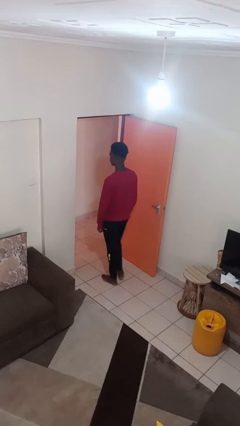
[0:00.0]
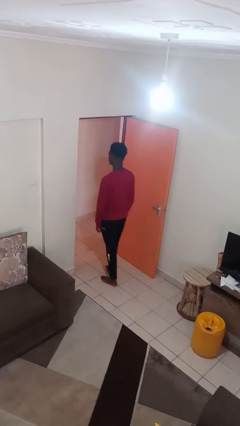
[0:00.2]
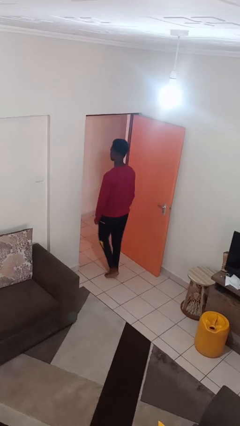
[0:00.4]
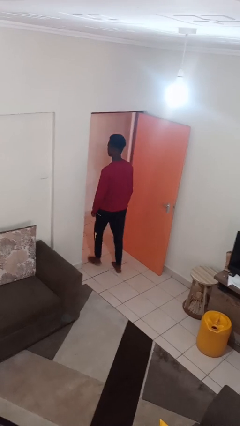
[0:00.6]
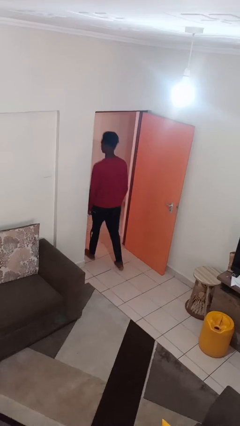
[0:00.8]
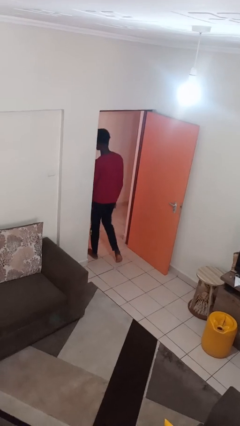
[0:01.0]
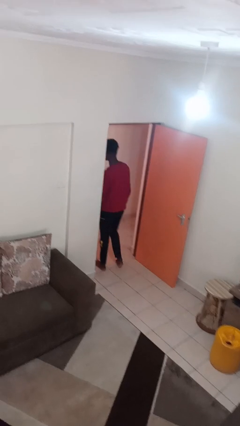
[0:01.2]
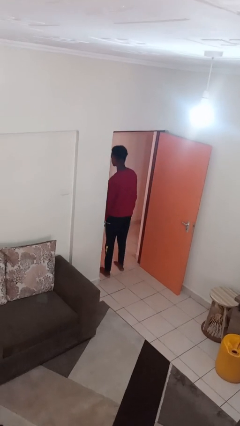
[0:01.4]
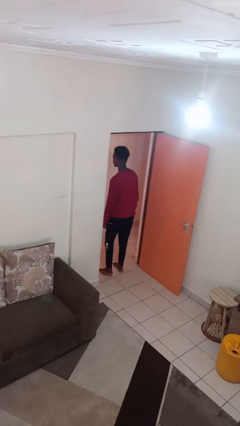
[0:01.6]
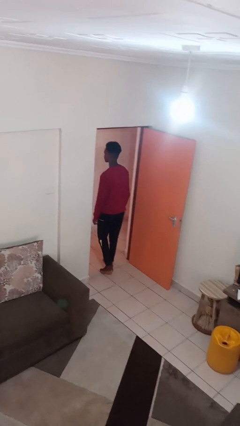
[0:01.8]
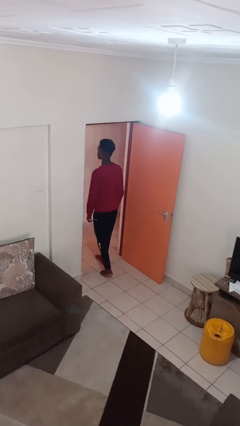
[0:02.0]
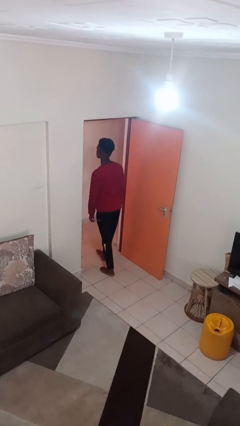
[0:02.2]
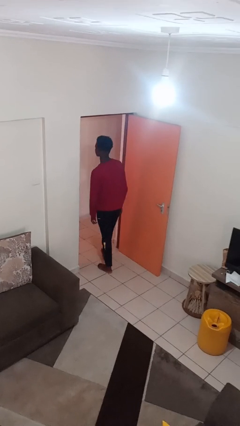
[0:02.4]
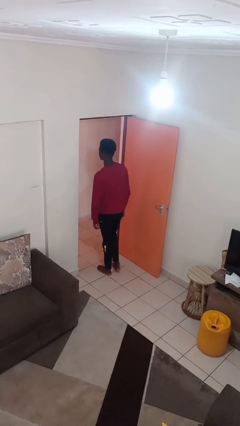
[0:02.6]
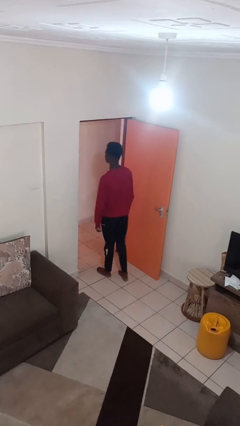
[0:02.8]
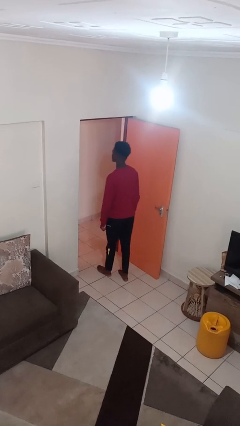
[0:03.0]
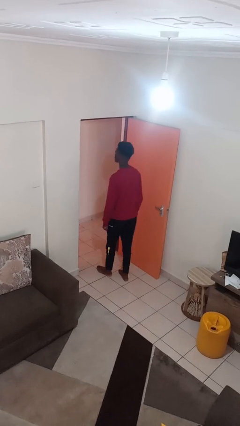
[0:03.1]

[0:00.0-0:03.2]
person bumps into wall

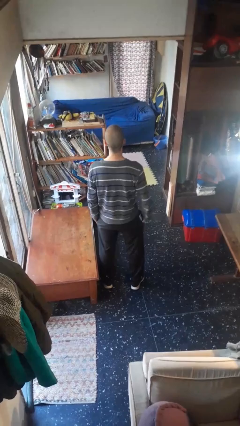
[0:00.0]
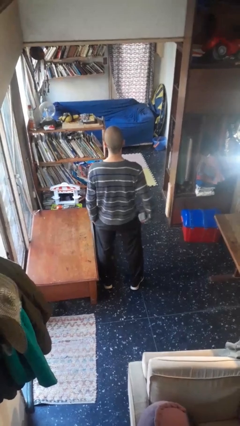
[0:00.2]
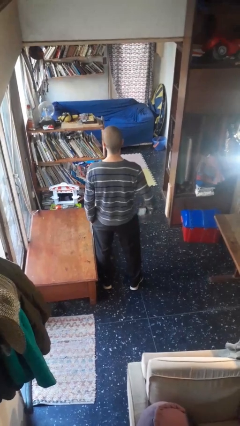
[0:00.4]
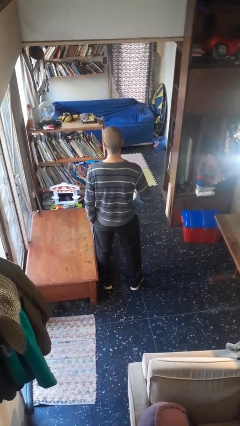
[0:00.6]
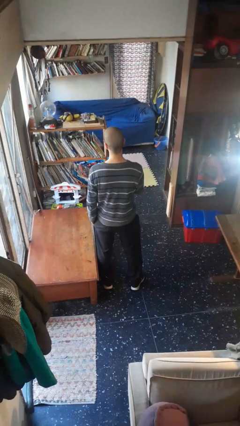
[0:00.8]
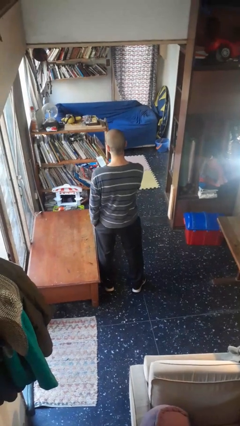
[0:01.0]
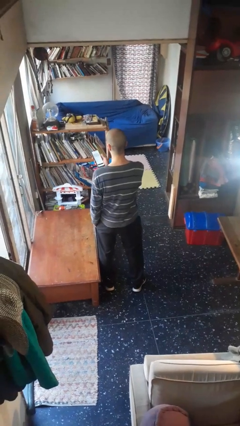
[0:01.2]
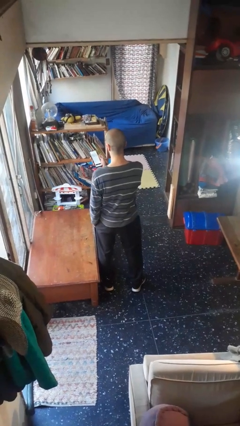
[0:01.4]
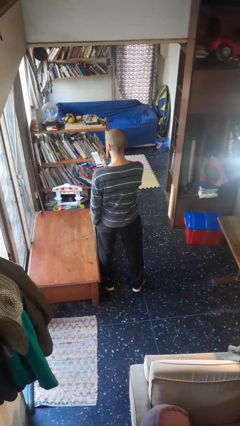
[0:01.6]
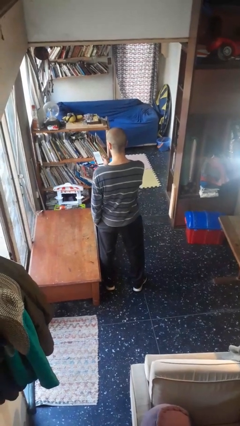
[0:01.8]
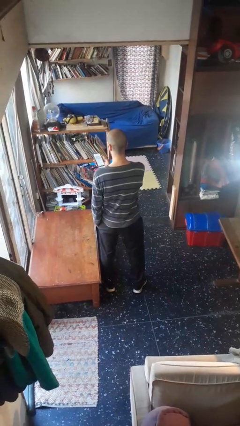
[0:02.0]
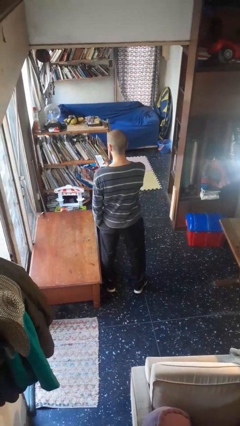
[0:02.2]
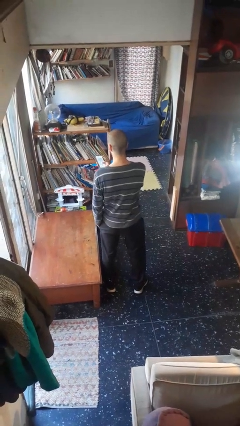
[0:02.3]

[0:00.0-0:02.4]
person takes phone from pocket

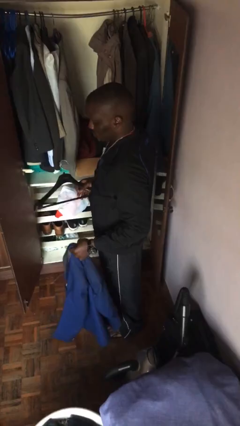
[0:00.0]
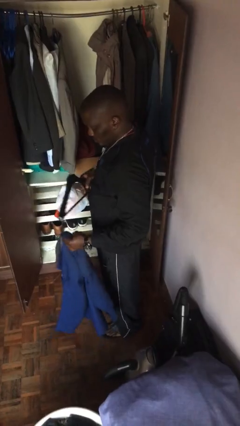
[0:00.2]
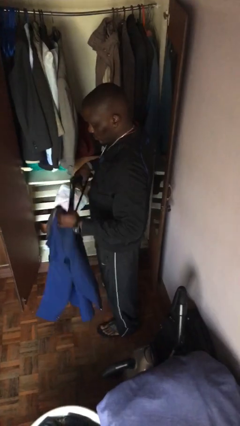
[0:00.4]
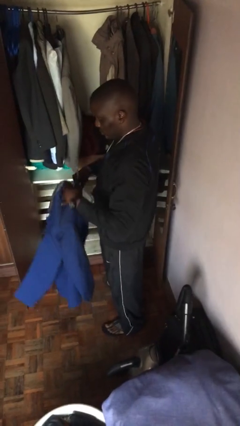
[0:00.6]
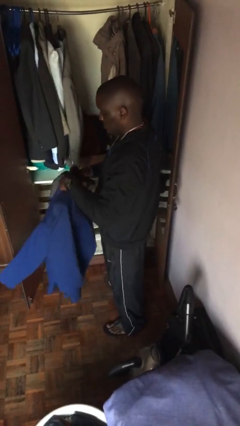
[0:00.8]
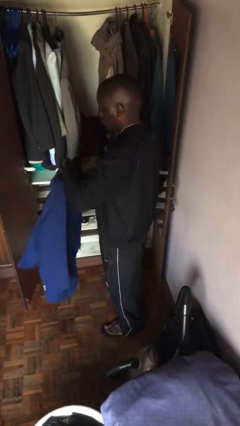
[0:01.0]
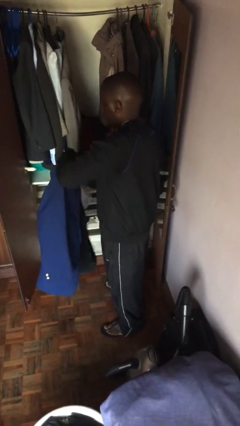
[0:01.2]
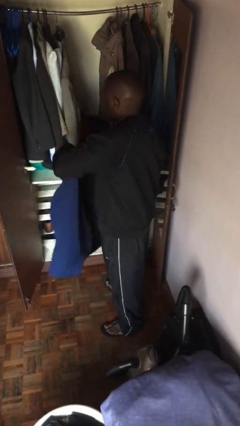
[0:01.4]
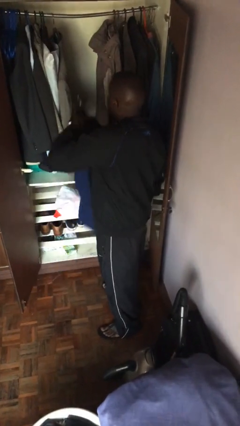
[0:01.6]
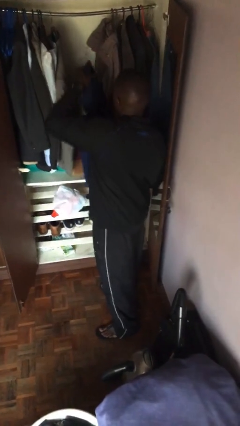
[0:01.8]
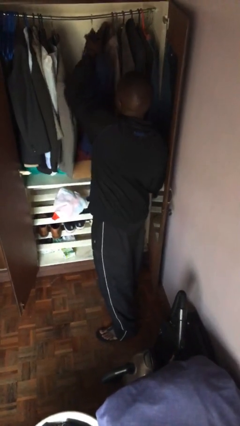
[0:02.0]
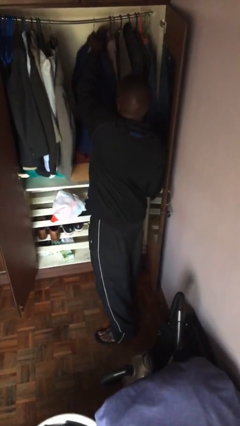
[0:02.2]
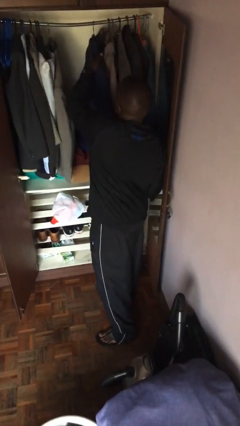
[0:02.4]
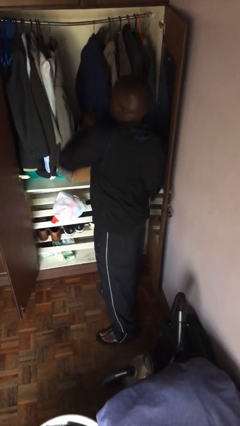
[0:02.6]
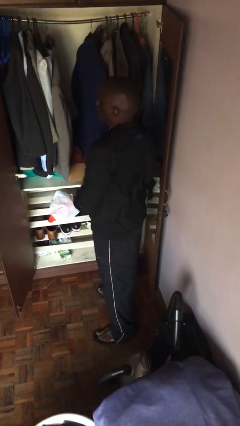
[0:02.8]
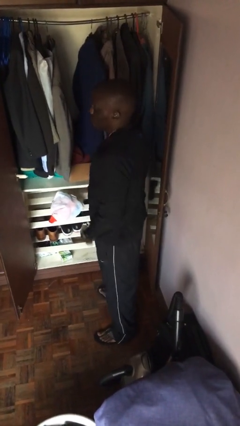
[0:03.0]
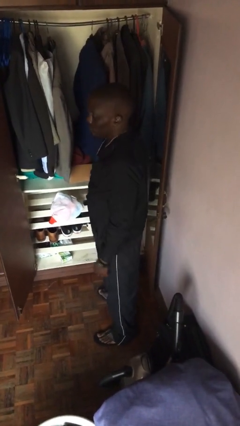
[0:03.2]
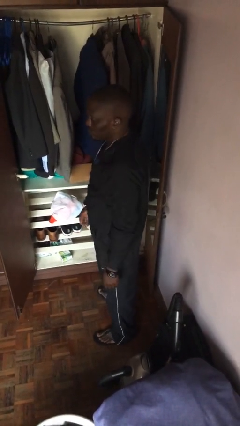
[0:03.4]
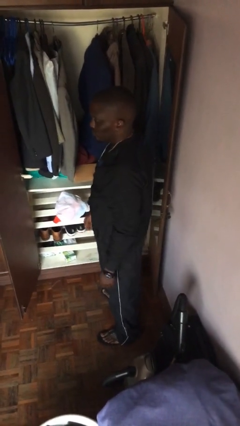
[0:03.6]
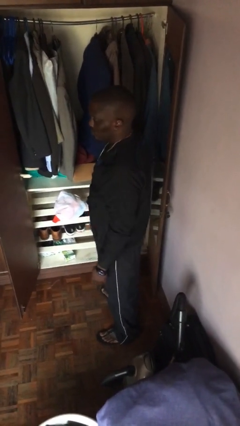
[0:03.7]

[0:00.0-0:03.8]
person puts clothes into closet

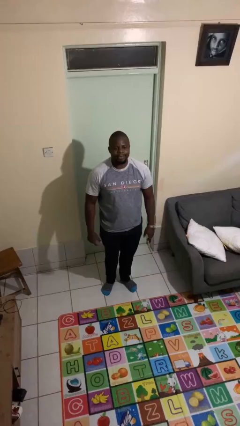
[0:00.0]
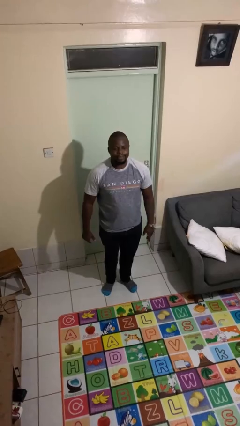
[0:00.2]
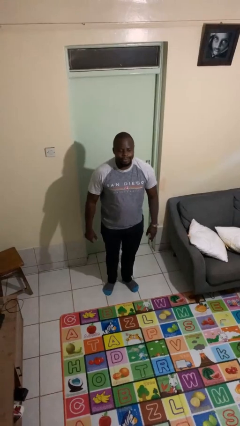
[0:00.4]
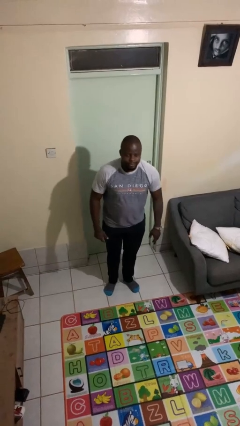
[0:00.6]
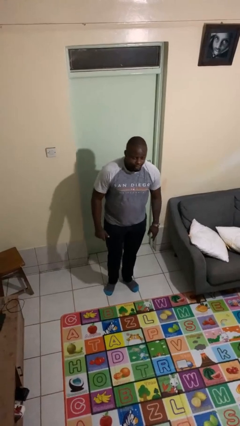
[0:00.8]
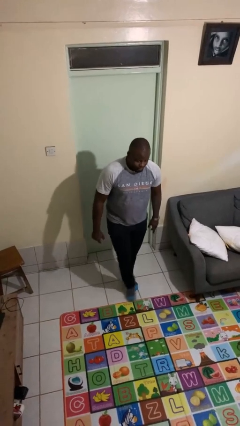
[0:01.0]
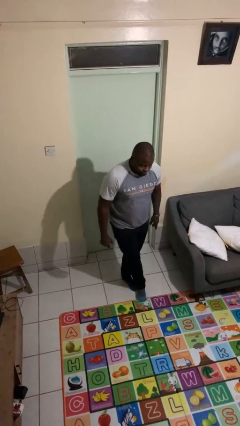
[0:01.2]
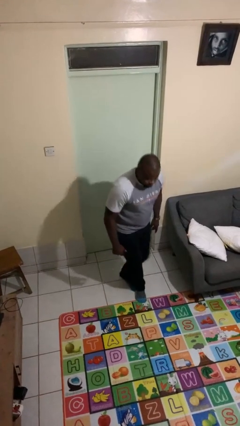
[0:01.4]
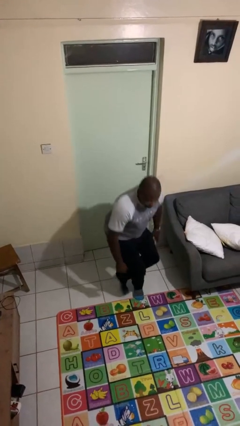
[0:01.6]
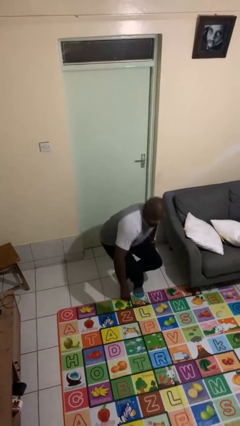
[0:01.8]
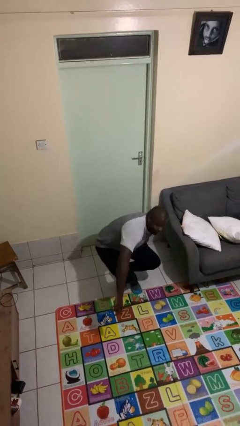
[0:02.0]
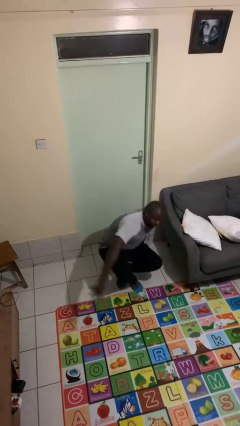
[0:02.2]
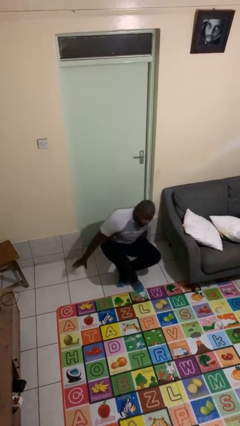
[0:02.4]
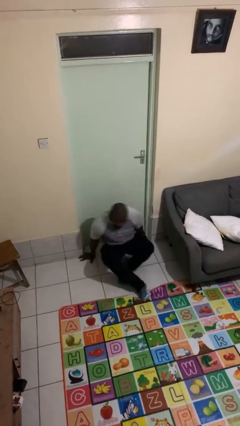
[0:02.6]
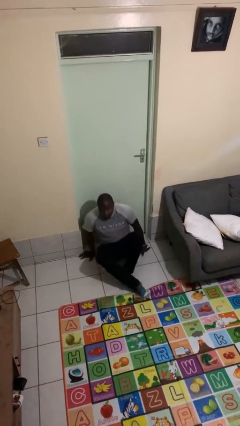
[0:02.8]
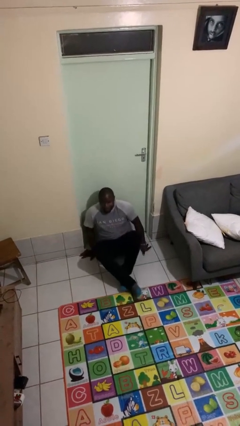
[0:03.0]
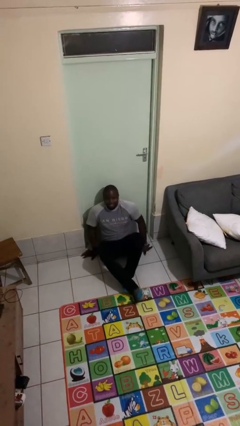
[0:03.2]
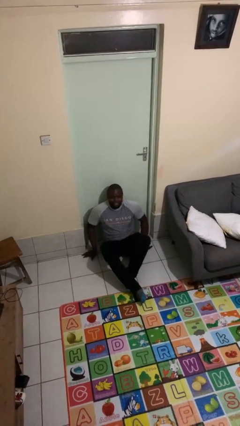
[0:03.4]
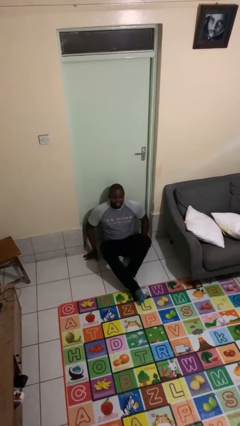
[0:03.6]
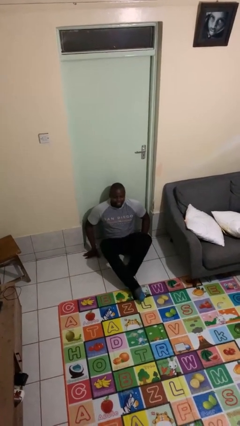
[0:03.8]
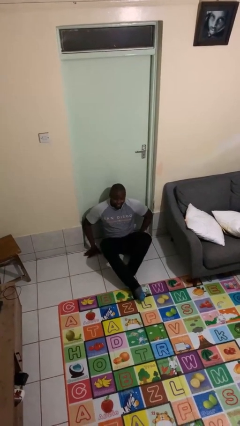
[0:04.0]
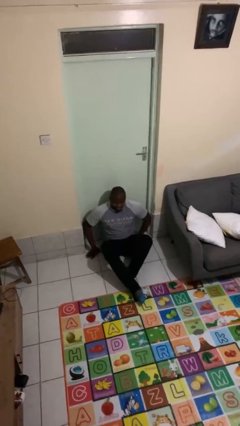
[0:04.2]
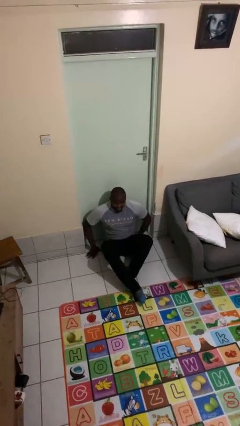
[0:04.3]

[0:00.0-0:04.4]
person sits crisscross

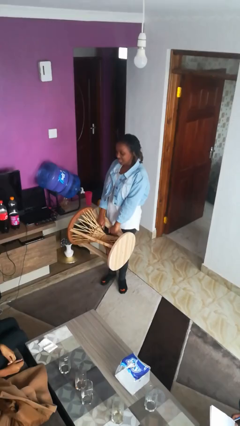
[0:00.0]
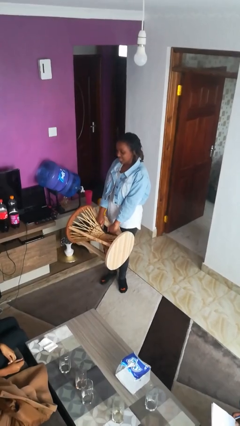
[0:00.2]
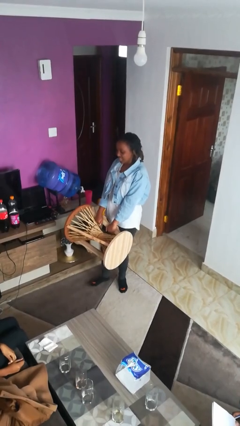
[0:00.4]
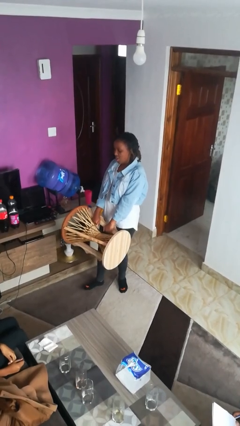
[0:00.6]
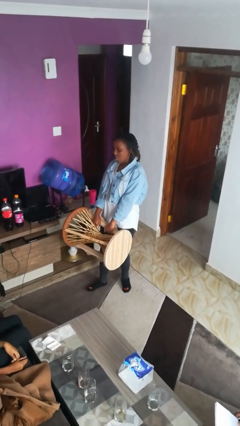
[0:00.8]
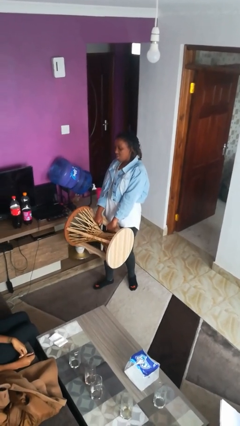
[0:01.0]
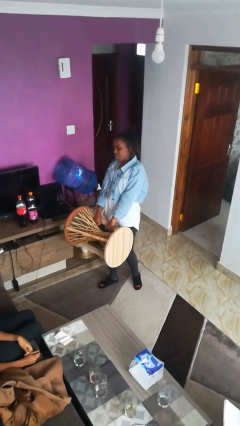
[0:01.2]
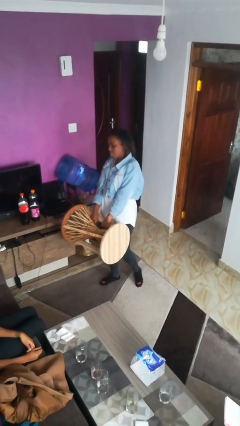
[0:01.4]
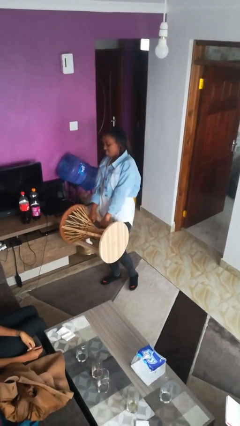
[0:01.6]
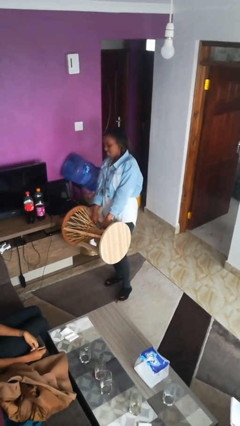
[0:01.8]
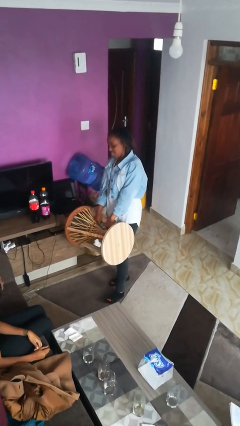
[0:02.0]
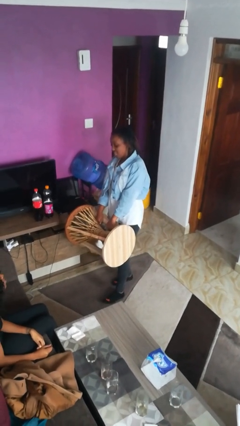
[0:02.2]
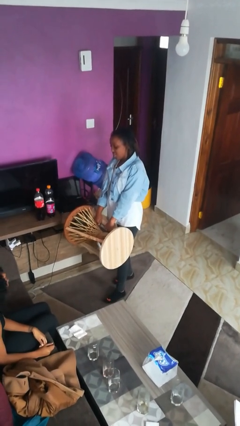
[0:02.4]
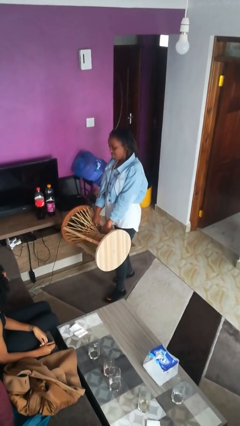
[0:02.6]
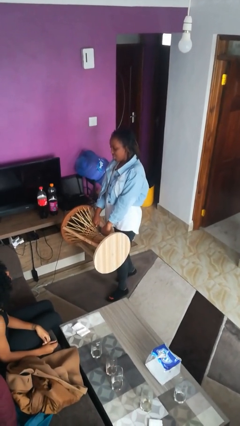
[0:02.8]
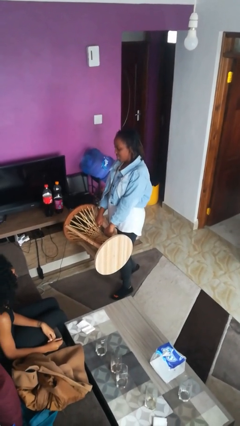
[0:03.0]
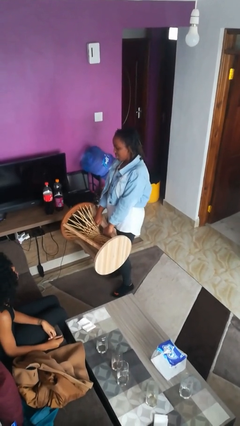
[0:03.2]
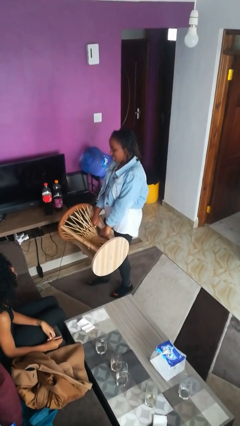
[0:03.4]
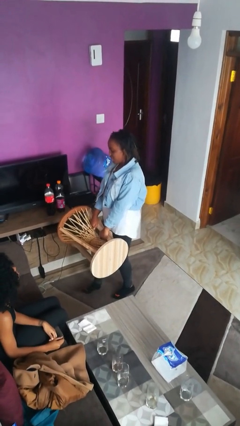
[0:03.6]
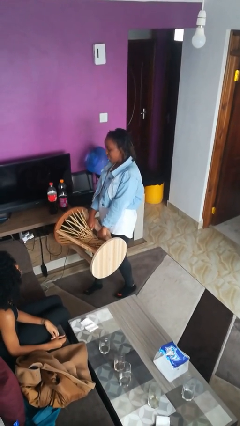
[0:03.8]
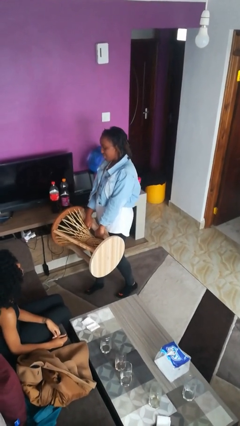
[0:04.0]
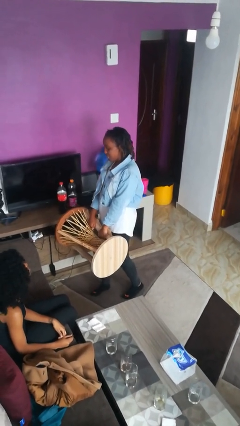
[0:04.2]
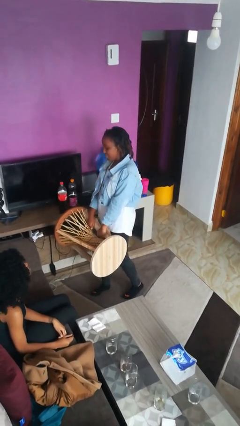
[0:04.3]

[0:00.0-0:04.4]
person carries furniture
